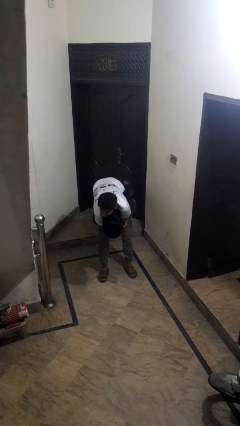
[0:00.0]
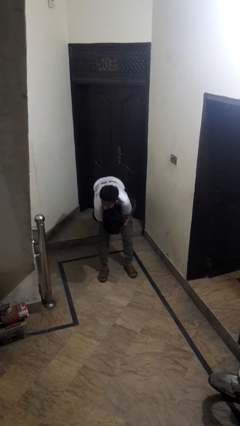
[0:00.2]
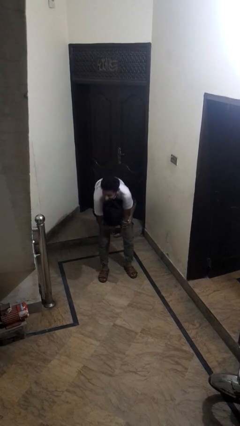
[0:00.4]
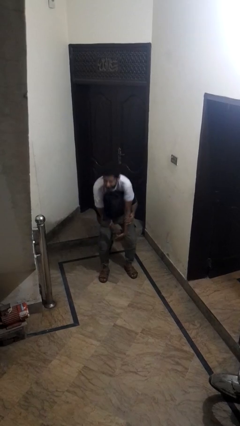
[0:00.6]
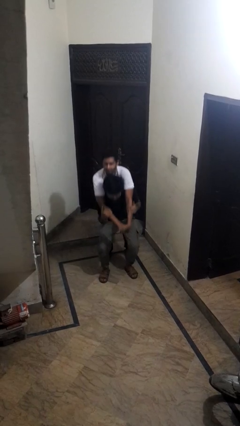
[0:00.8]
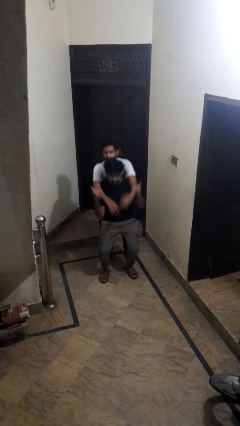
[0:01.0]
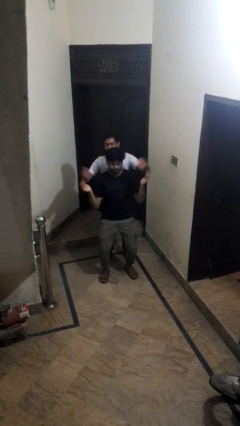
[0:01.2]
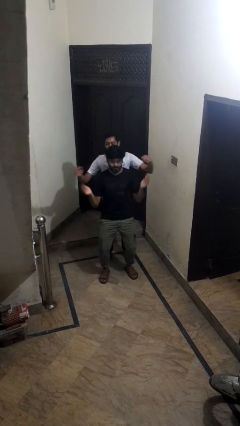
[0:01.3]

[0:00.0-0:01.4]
person puts down person

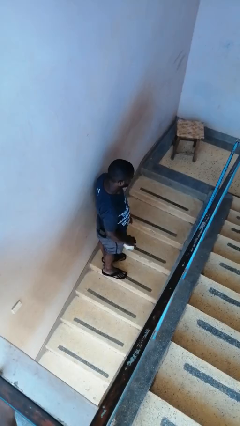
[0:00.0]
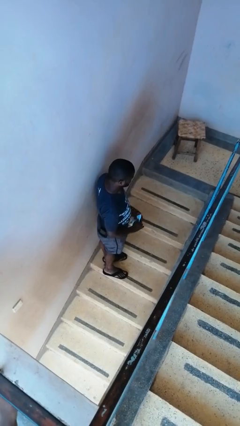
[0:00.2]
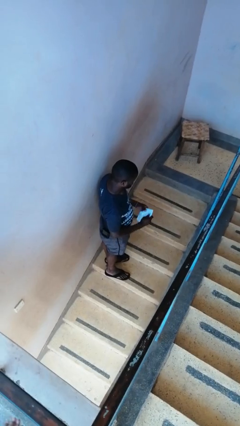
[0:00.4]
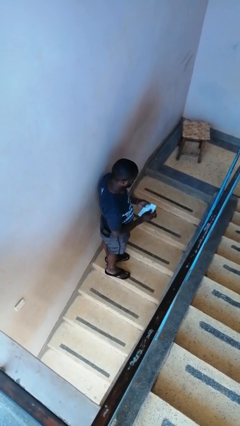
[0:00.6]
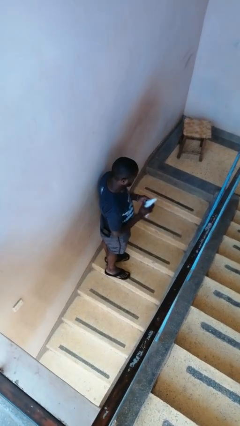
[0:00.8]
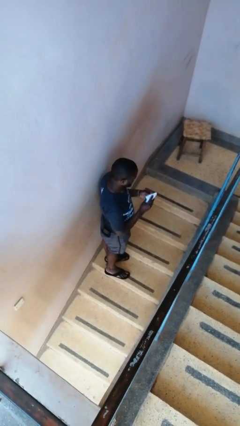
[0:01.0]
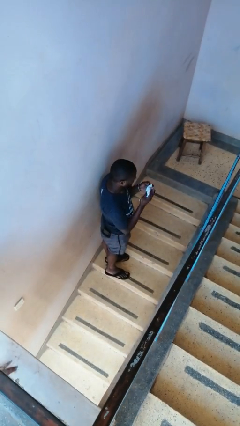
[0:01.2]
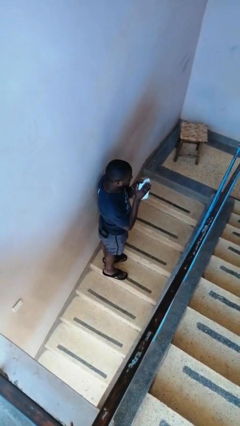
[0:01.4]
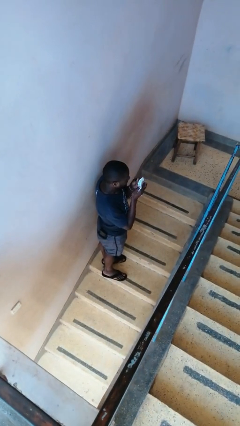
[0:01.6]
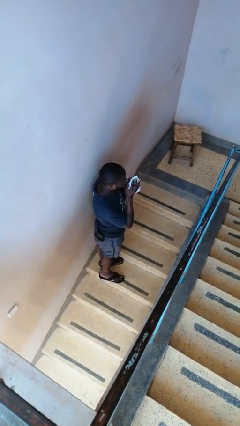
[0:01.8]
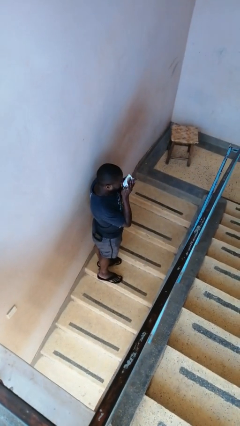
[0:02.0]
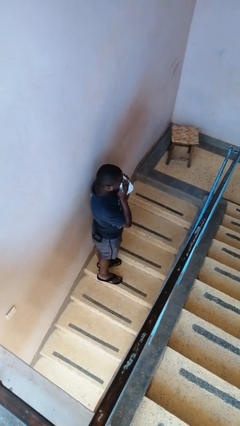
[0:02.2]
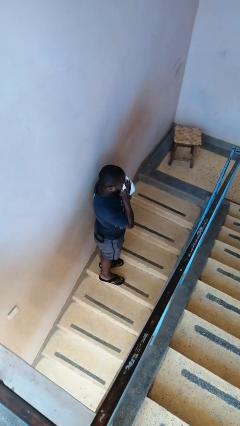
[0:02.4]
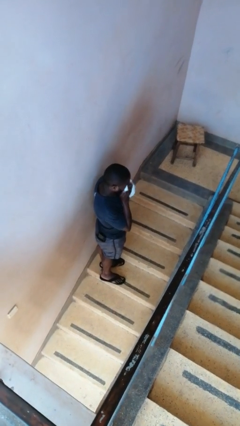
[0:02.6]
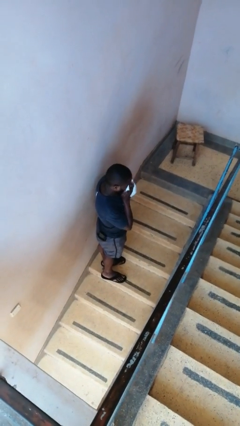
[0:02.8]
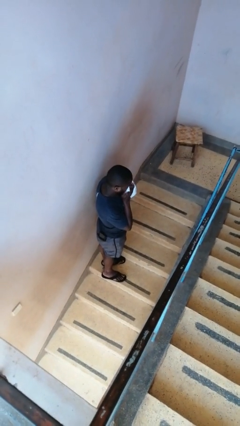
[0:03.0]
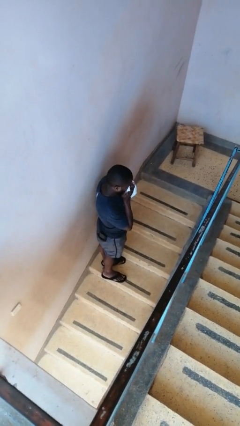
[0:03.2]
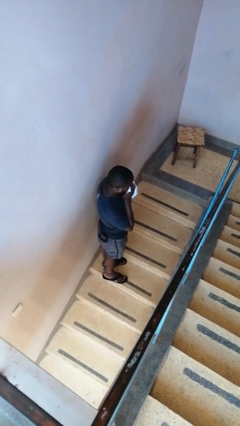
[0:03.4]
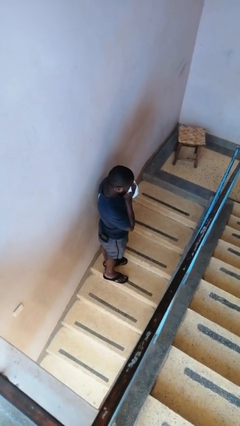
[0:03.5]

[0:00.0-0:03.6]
person blows nose

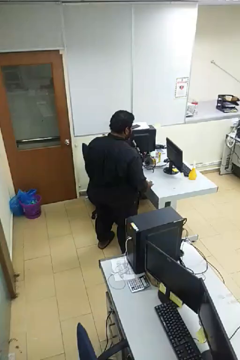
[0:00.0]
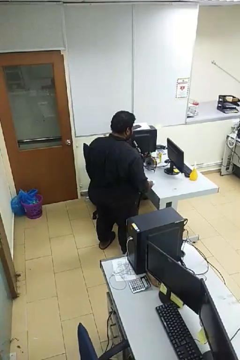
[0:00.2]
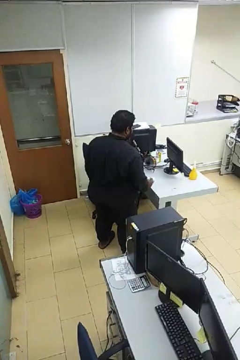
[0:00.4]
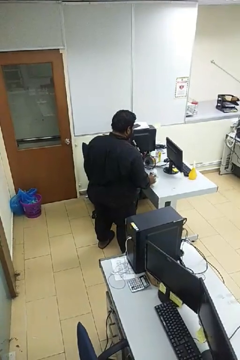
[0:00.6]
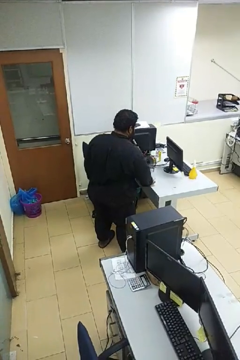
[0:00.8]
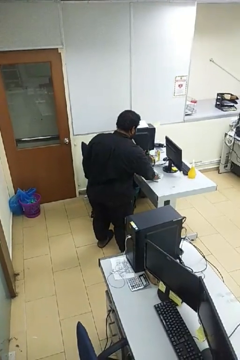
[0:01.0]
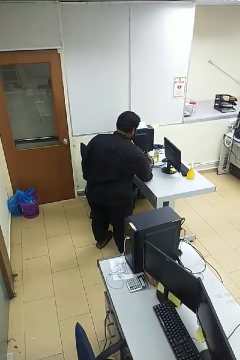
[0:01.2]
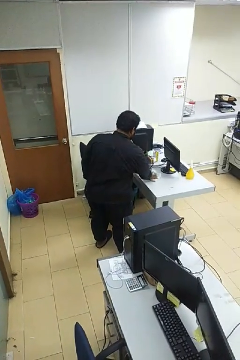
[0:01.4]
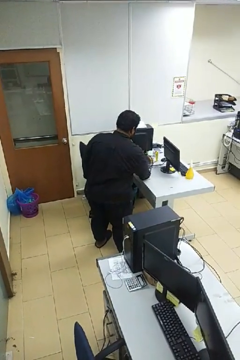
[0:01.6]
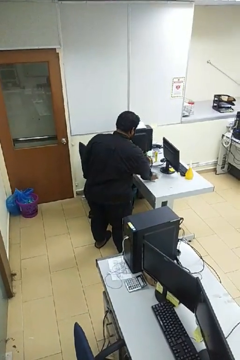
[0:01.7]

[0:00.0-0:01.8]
person cleans table with rag

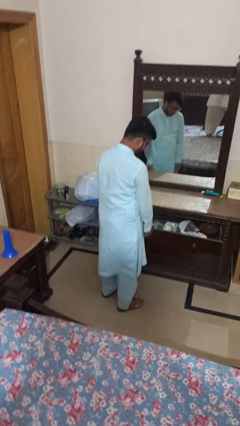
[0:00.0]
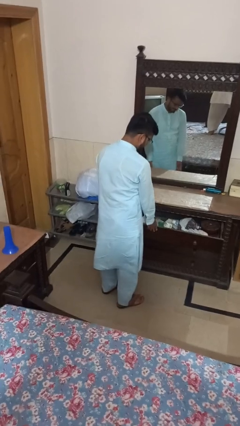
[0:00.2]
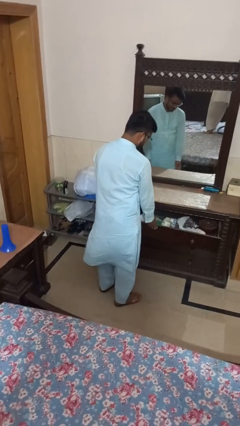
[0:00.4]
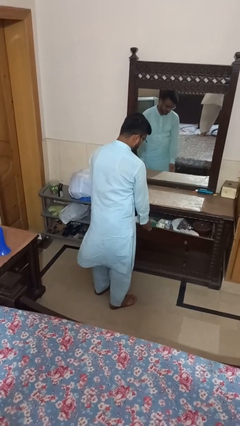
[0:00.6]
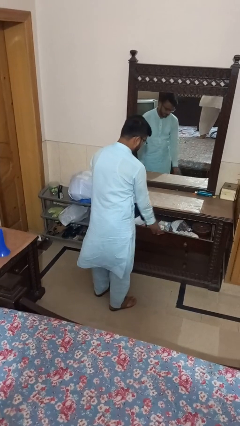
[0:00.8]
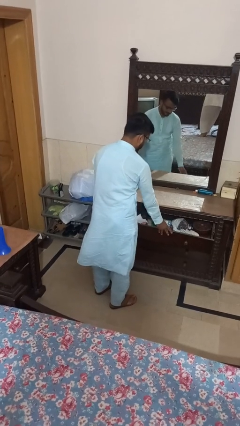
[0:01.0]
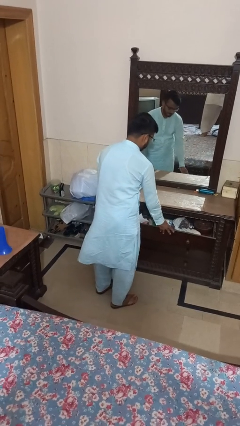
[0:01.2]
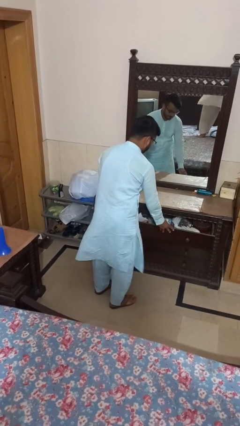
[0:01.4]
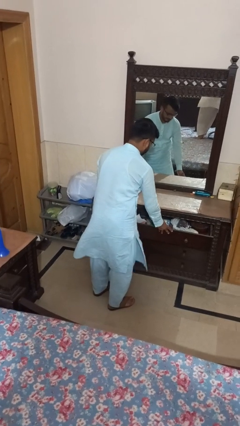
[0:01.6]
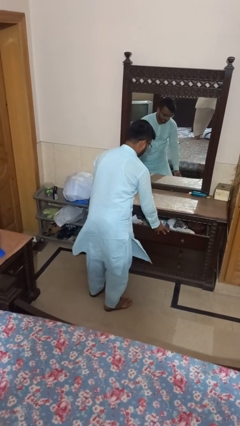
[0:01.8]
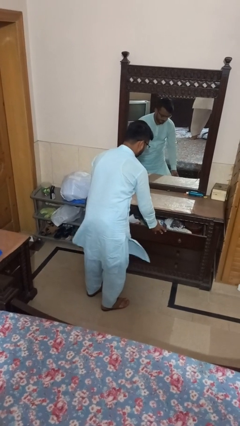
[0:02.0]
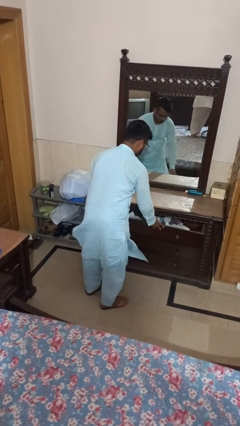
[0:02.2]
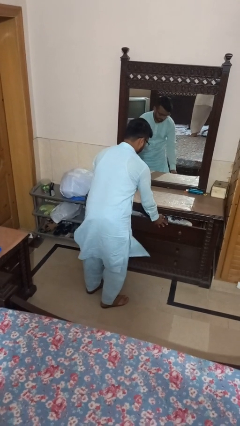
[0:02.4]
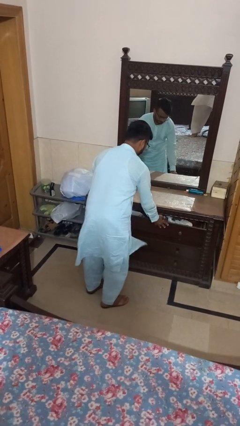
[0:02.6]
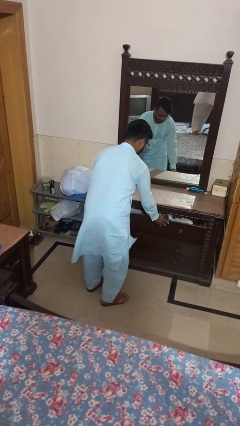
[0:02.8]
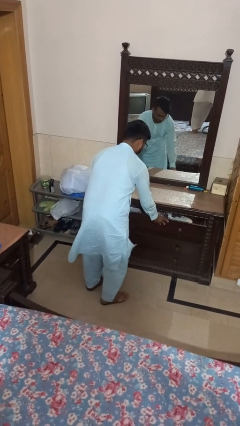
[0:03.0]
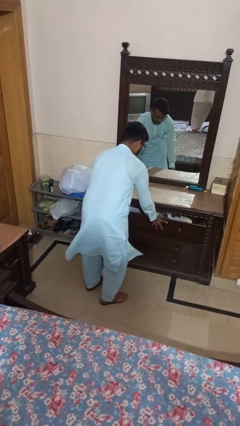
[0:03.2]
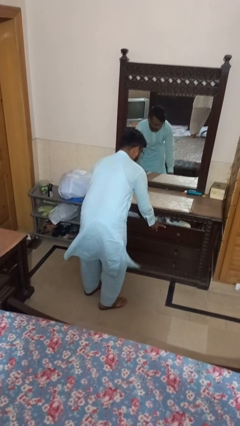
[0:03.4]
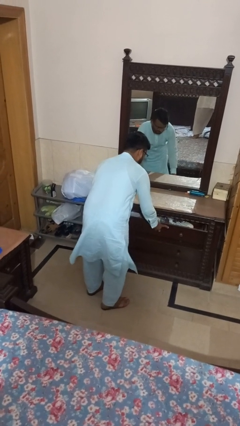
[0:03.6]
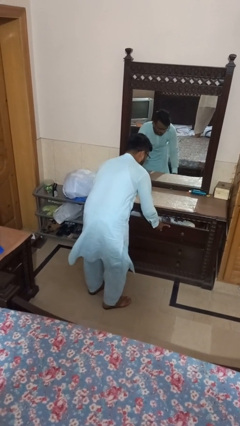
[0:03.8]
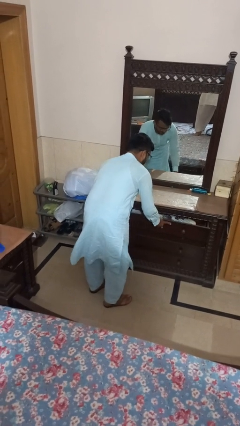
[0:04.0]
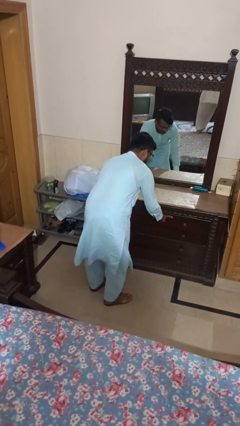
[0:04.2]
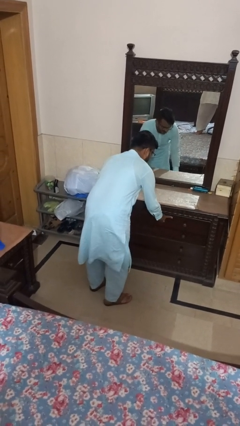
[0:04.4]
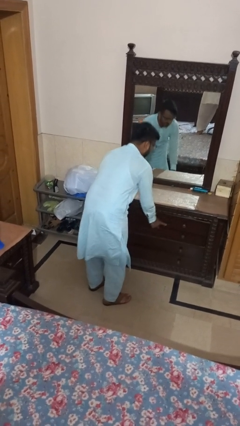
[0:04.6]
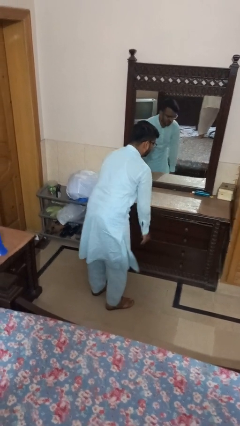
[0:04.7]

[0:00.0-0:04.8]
person closes dresser drawer

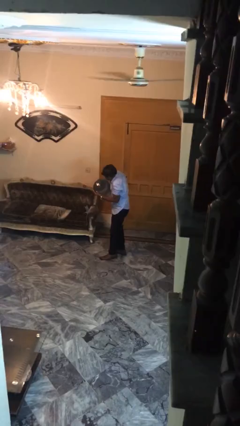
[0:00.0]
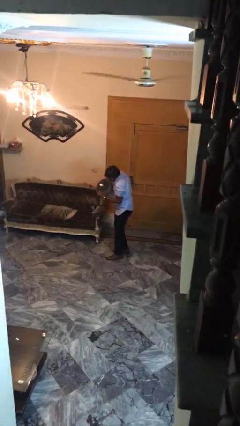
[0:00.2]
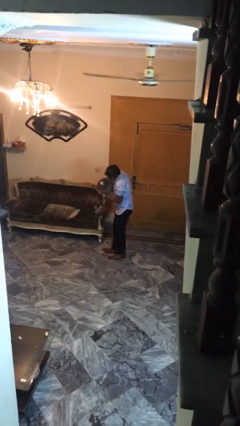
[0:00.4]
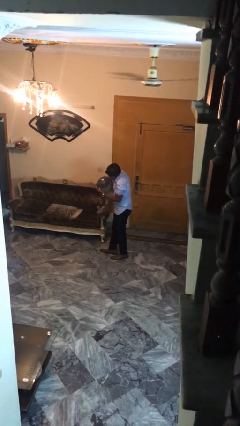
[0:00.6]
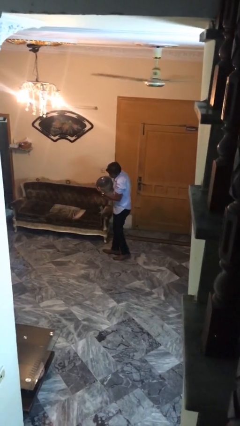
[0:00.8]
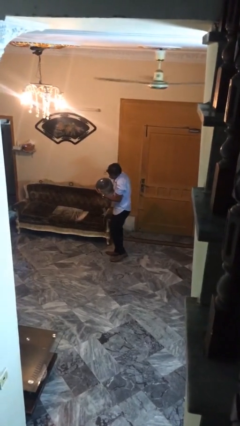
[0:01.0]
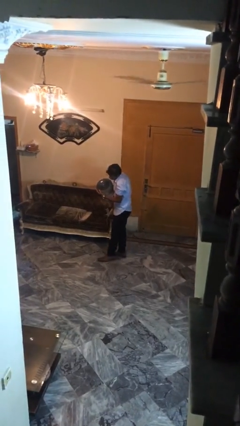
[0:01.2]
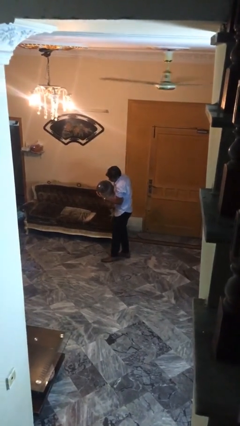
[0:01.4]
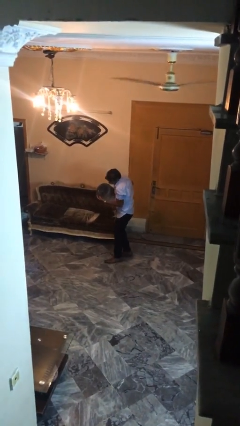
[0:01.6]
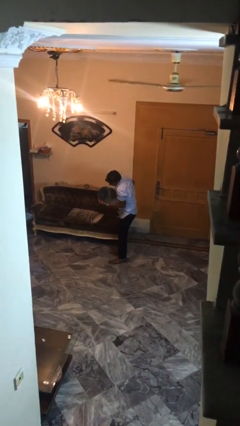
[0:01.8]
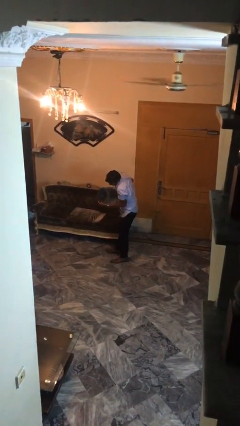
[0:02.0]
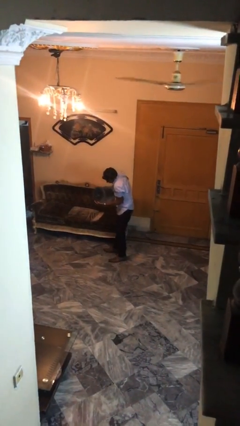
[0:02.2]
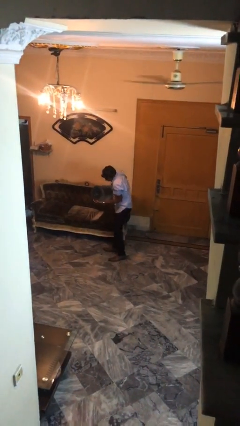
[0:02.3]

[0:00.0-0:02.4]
person carries heavy object

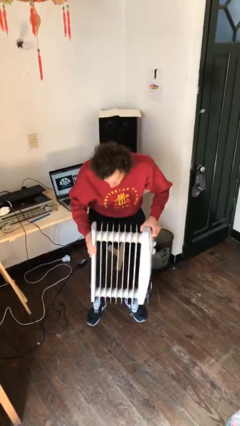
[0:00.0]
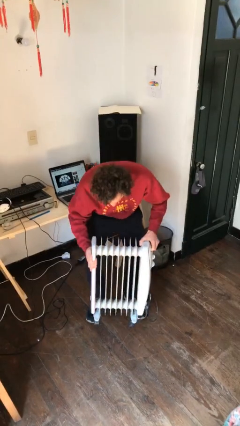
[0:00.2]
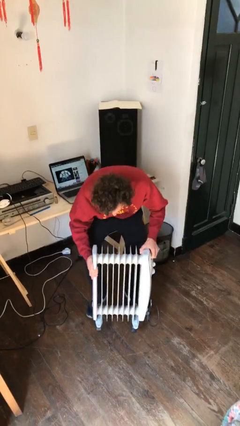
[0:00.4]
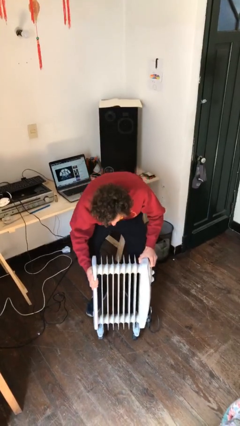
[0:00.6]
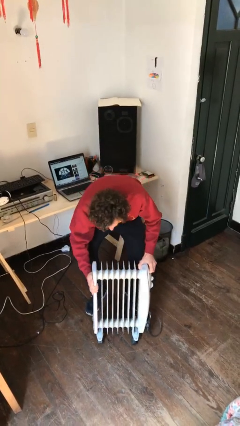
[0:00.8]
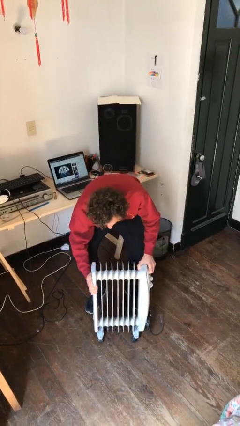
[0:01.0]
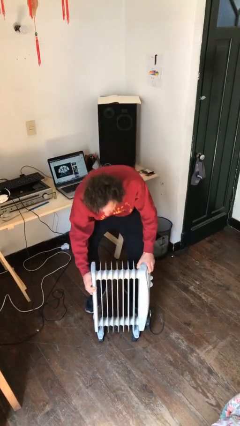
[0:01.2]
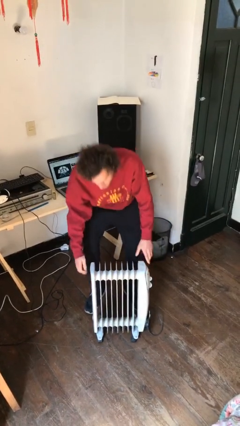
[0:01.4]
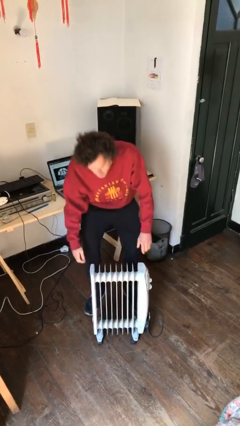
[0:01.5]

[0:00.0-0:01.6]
person puts down object on floor

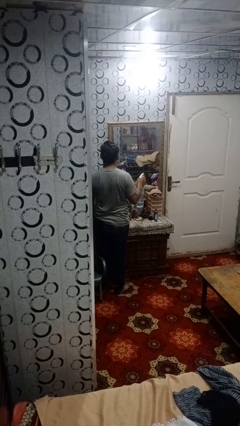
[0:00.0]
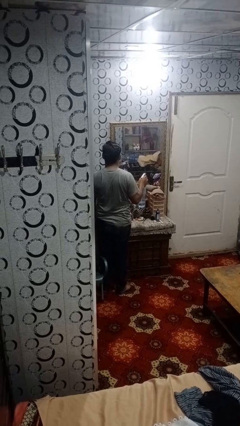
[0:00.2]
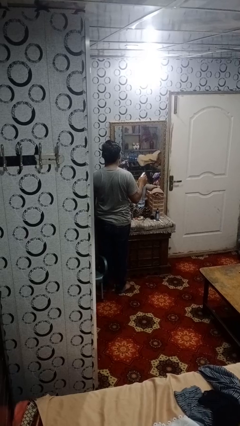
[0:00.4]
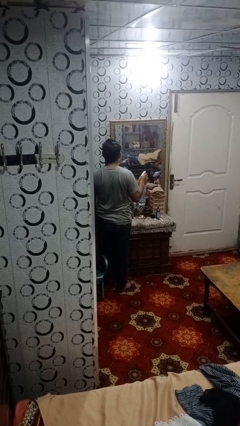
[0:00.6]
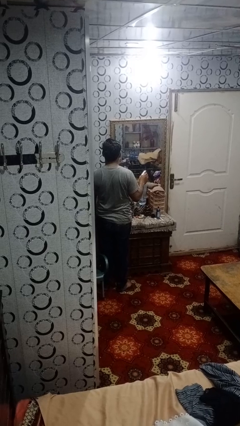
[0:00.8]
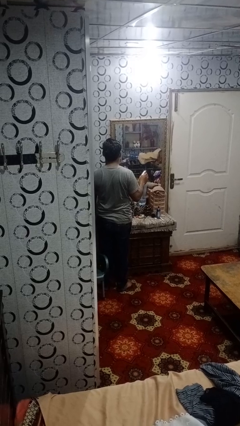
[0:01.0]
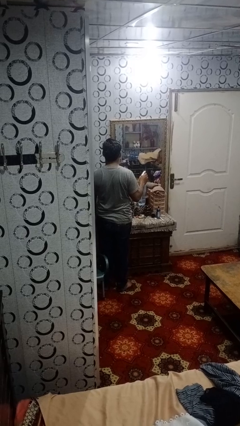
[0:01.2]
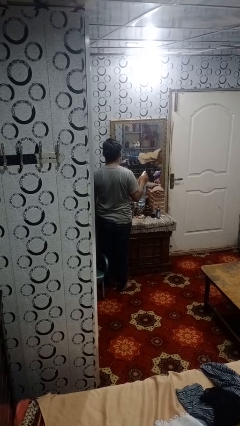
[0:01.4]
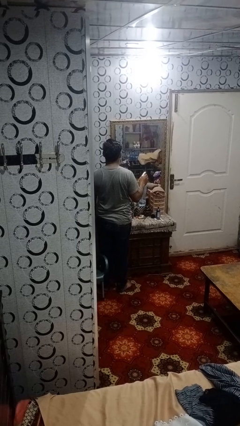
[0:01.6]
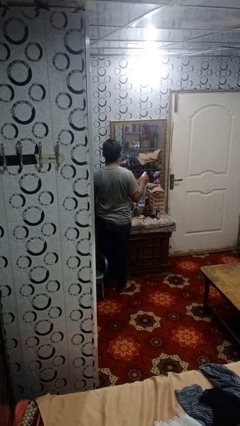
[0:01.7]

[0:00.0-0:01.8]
person sprays from bottle
